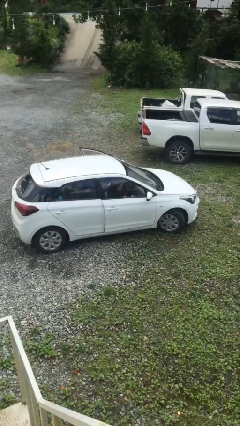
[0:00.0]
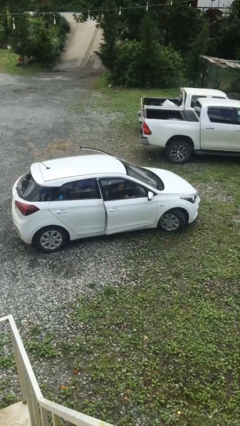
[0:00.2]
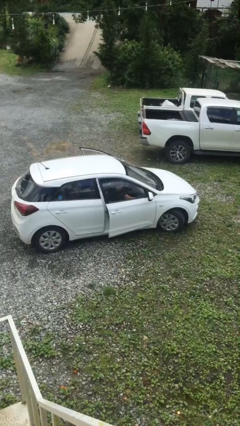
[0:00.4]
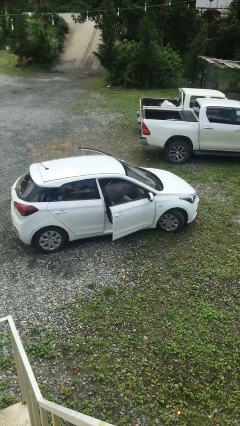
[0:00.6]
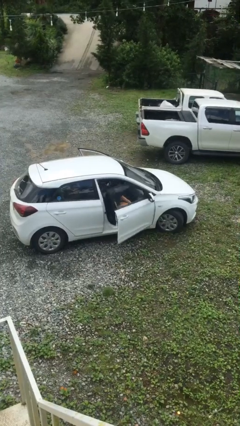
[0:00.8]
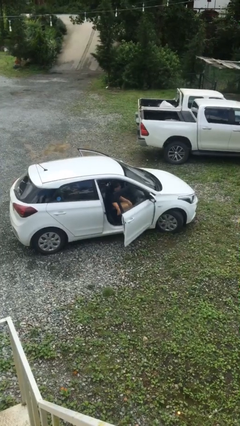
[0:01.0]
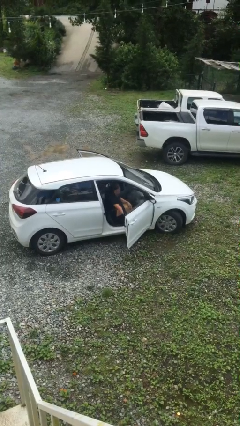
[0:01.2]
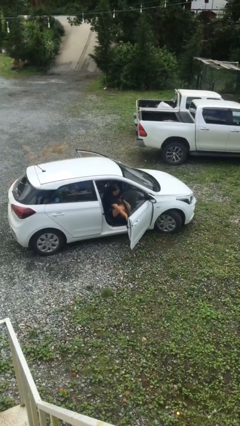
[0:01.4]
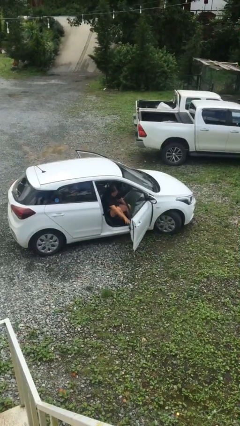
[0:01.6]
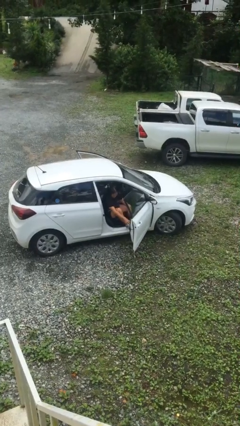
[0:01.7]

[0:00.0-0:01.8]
person opens car door

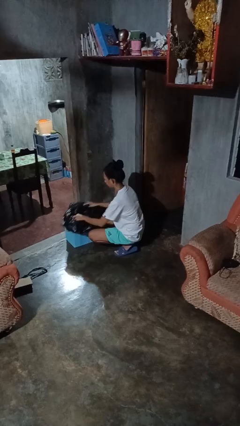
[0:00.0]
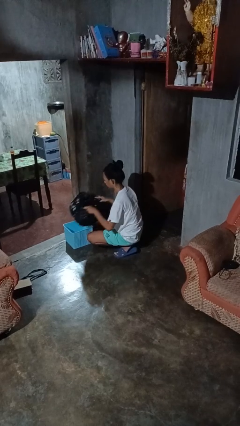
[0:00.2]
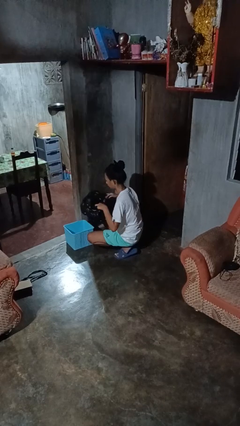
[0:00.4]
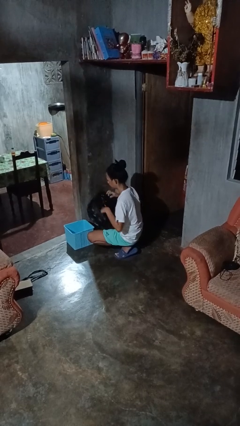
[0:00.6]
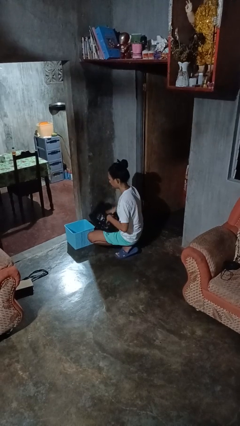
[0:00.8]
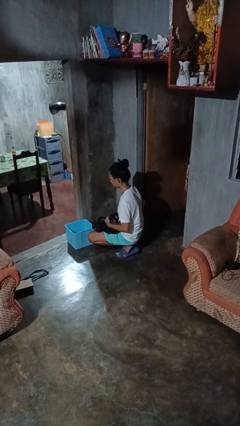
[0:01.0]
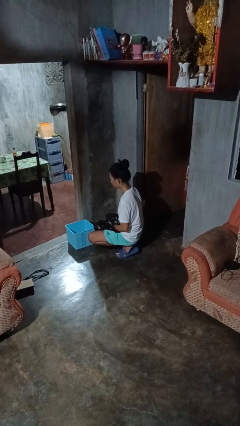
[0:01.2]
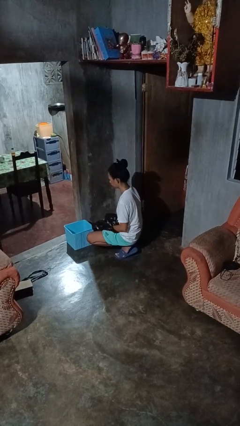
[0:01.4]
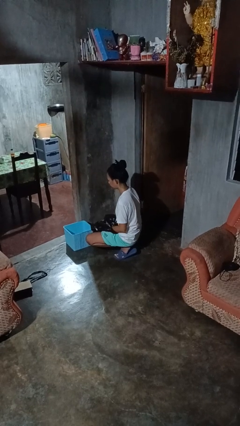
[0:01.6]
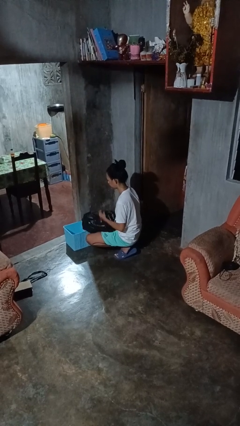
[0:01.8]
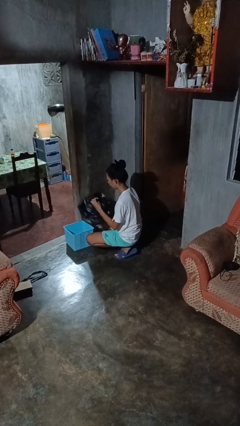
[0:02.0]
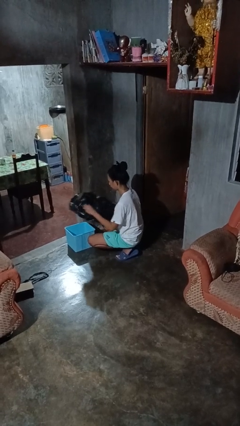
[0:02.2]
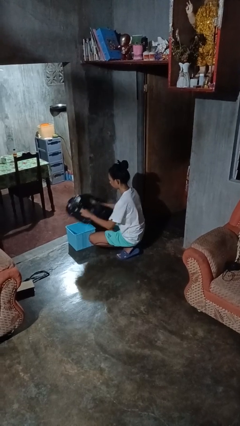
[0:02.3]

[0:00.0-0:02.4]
person removes trashbag from trashcan

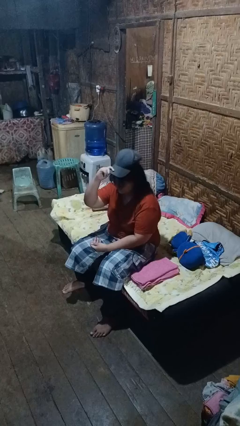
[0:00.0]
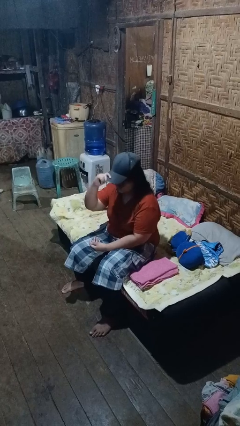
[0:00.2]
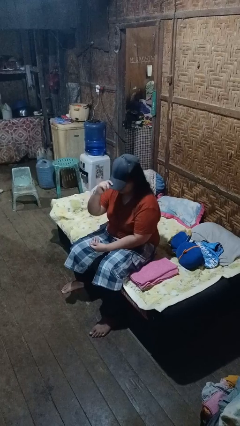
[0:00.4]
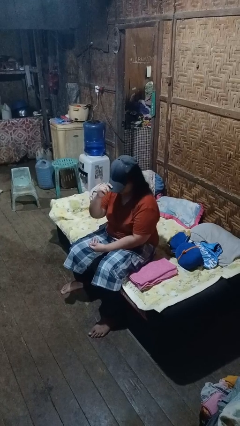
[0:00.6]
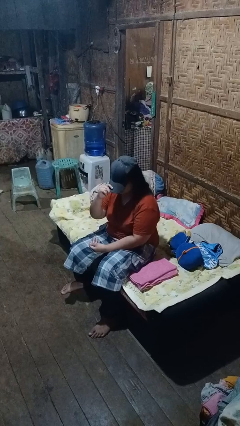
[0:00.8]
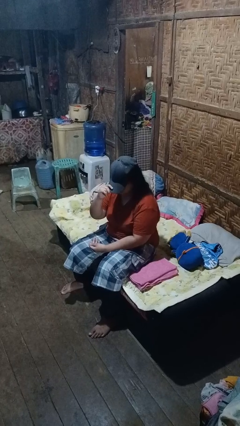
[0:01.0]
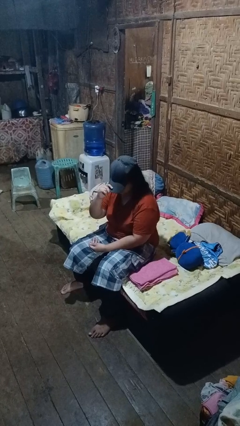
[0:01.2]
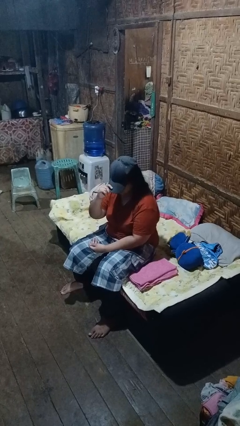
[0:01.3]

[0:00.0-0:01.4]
person puts on hat

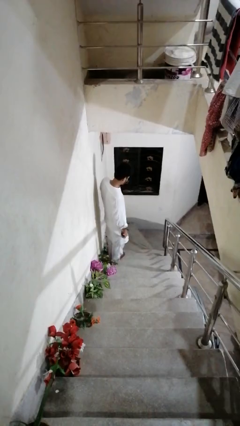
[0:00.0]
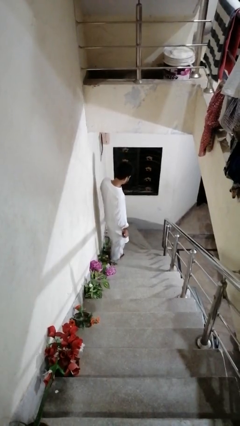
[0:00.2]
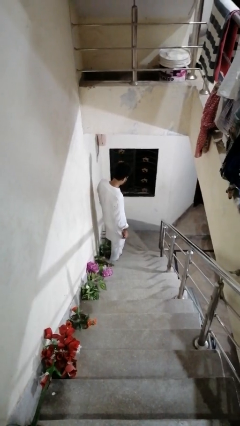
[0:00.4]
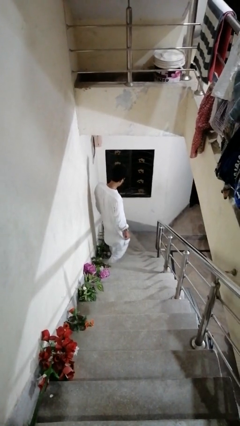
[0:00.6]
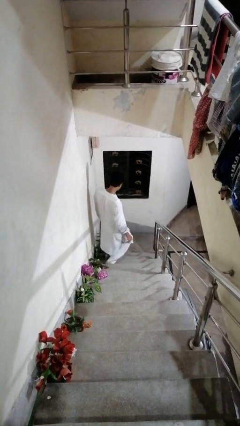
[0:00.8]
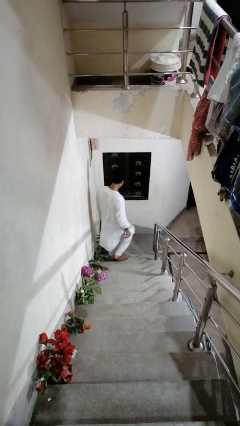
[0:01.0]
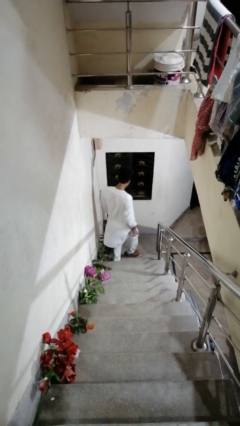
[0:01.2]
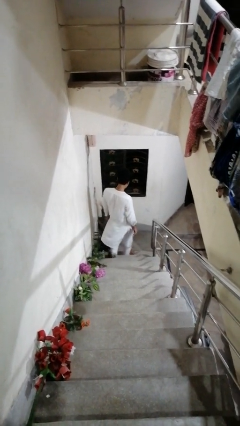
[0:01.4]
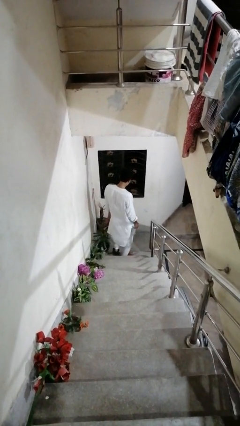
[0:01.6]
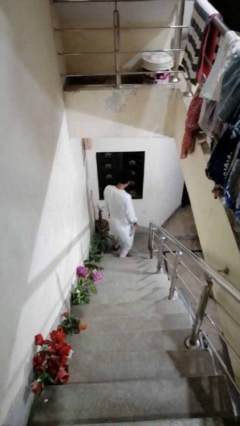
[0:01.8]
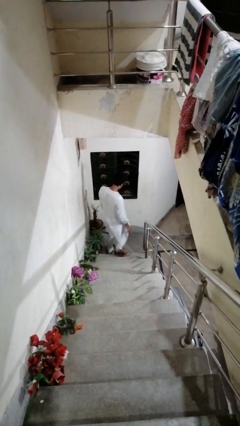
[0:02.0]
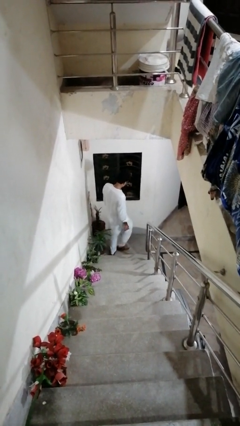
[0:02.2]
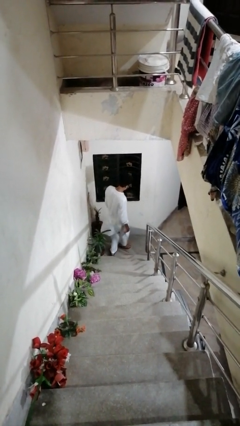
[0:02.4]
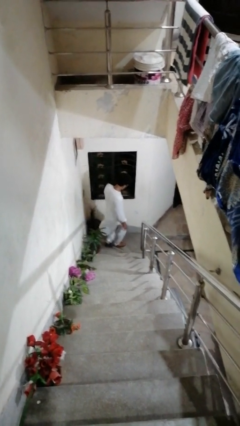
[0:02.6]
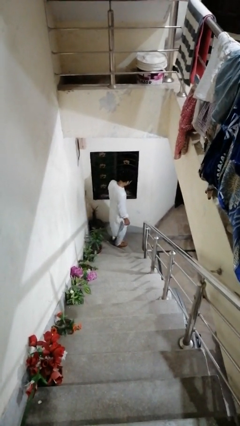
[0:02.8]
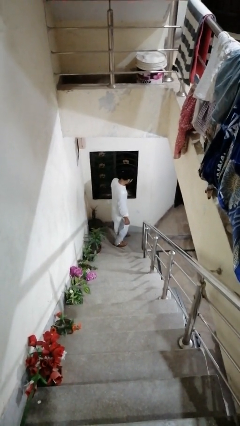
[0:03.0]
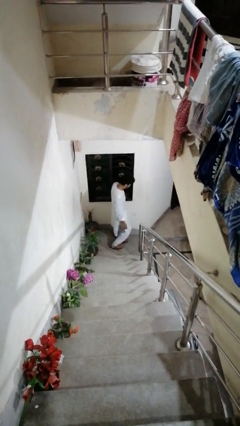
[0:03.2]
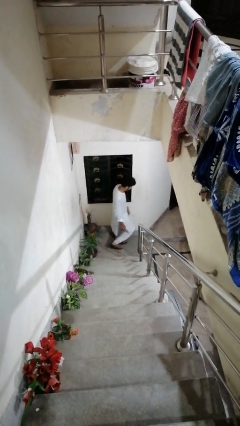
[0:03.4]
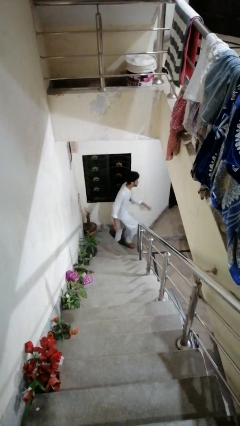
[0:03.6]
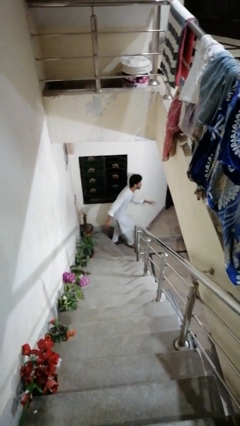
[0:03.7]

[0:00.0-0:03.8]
person climbs down stairs

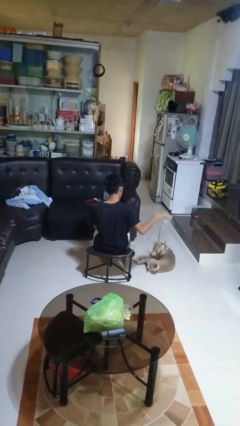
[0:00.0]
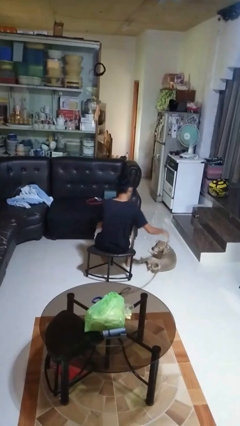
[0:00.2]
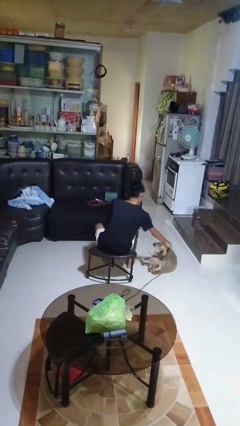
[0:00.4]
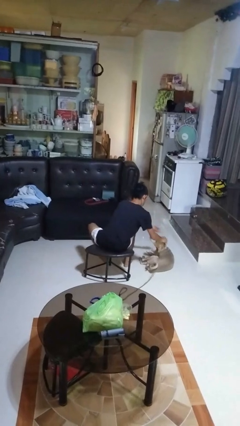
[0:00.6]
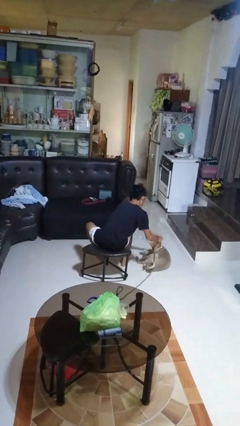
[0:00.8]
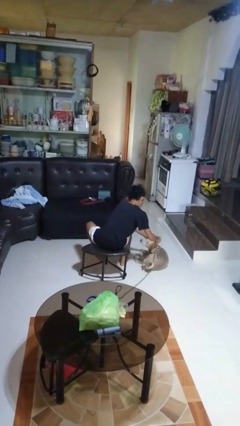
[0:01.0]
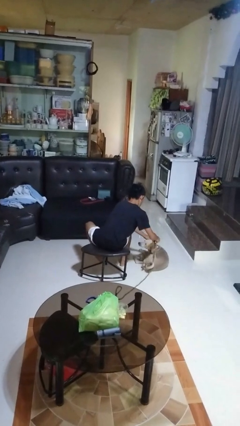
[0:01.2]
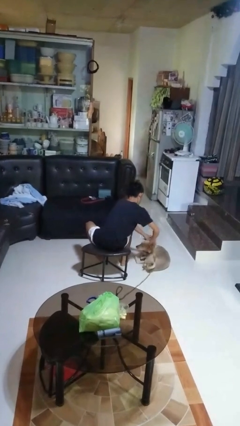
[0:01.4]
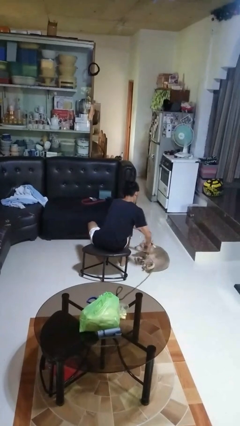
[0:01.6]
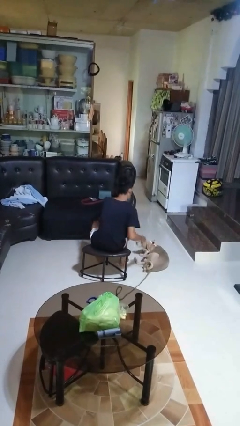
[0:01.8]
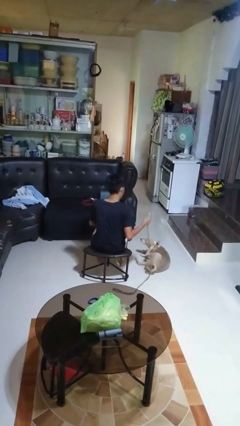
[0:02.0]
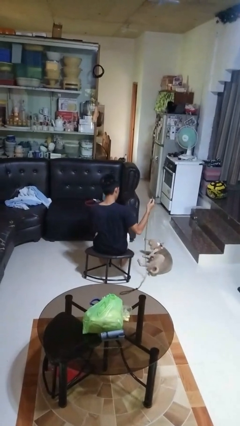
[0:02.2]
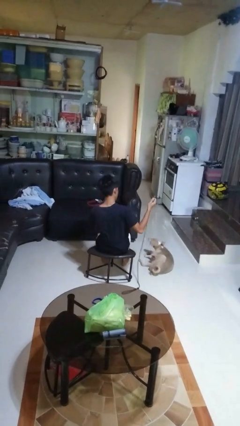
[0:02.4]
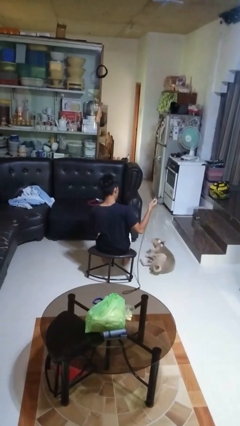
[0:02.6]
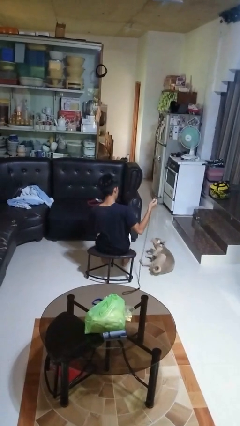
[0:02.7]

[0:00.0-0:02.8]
person unattaches leash from dog

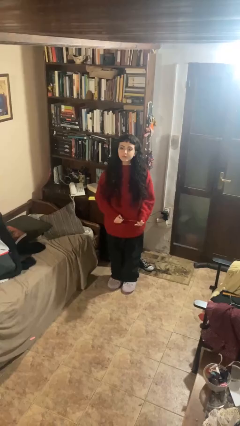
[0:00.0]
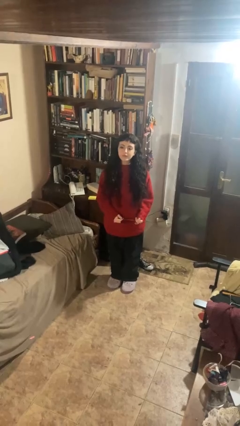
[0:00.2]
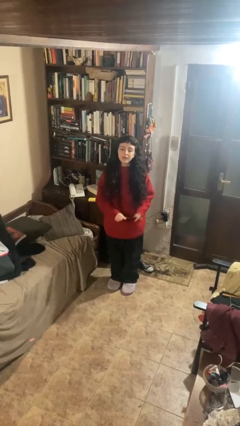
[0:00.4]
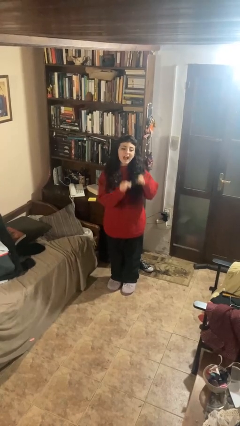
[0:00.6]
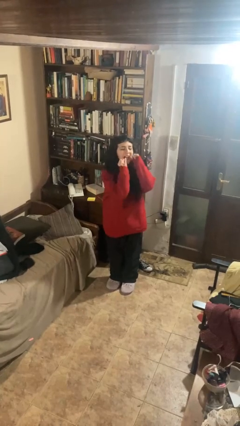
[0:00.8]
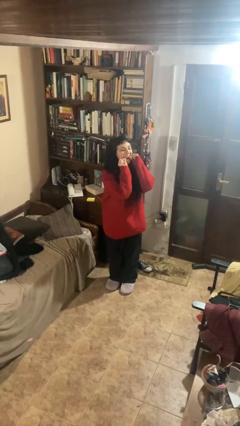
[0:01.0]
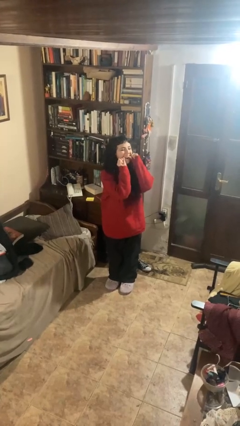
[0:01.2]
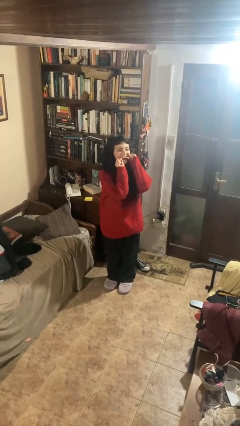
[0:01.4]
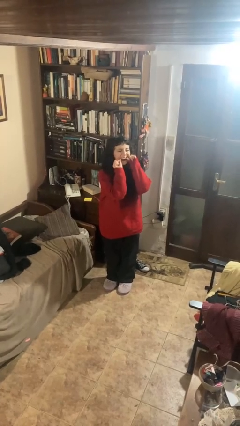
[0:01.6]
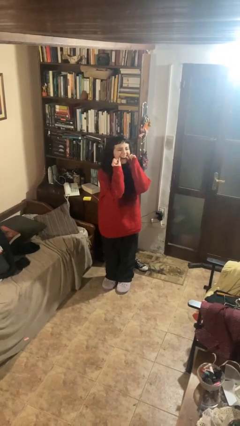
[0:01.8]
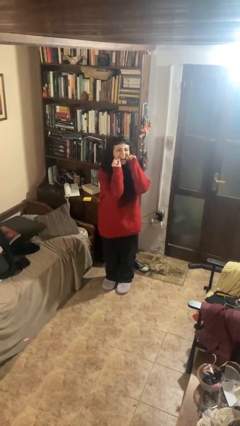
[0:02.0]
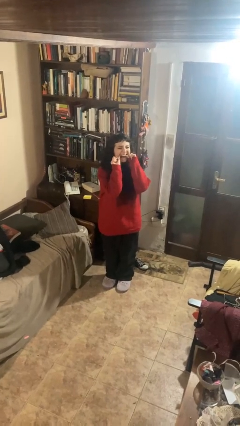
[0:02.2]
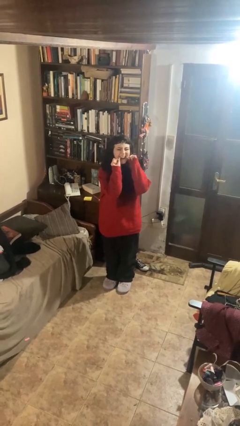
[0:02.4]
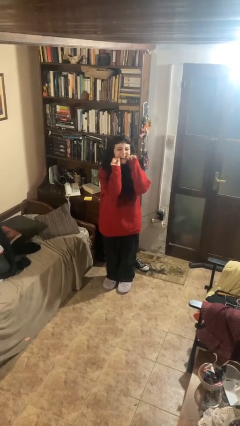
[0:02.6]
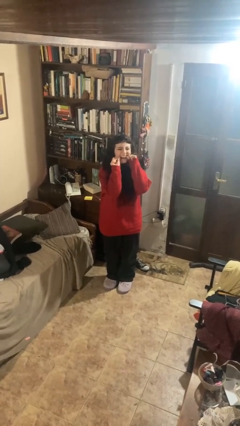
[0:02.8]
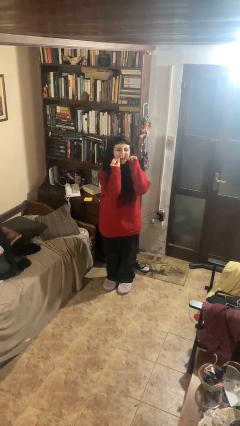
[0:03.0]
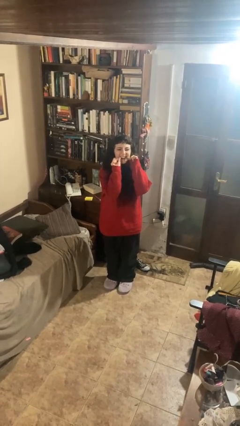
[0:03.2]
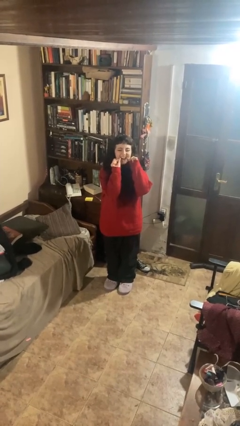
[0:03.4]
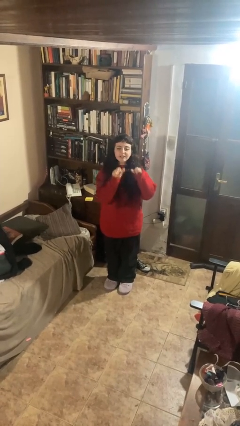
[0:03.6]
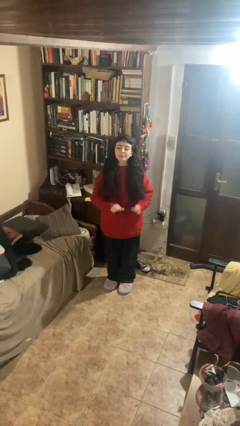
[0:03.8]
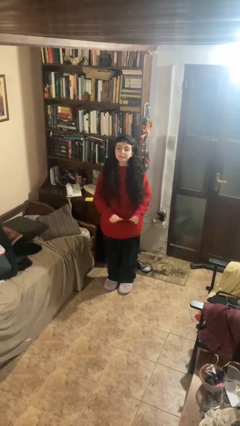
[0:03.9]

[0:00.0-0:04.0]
person flosses

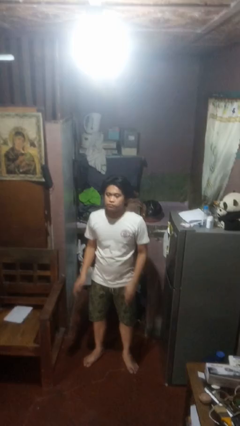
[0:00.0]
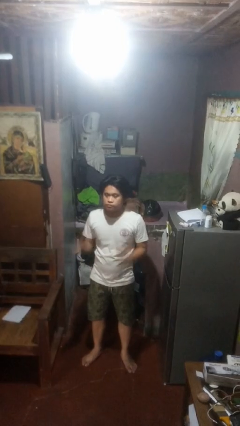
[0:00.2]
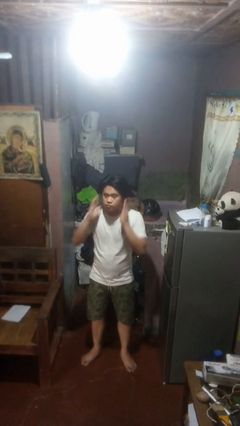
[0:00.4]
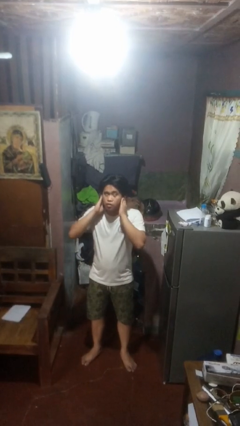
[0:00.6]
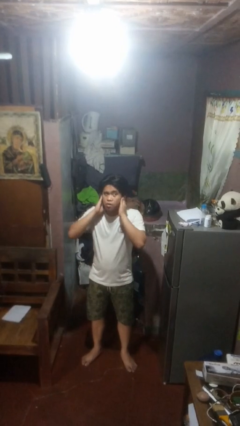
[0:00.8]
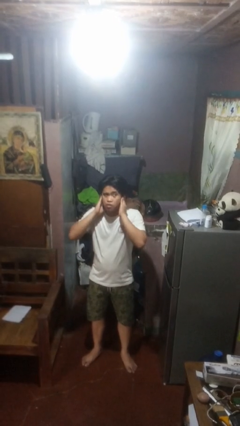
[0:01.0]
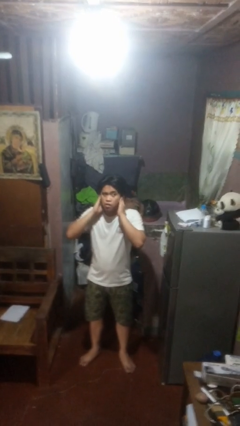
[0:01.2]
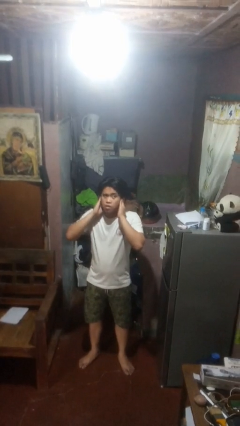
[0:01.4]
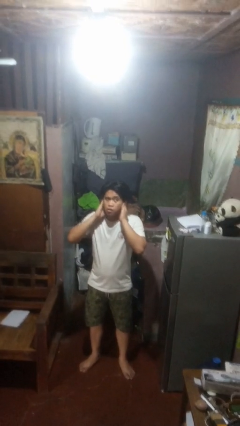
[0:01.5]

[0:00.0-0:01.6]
person puts fingers in ear
